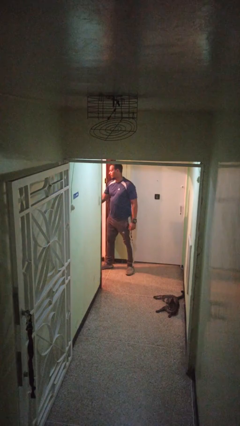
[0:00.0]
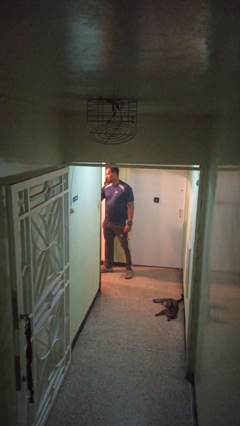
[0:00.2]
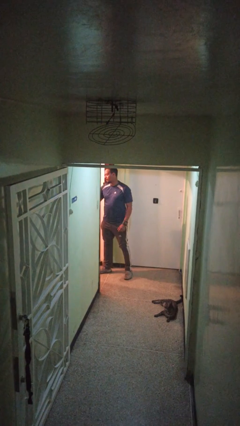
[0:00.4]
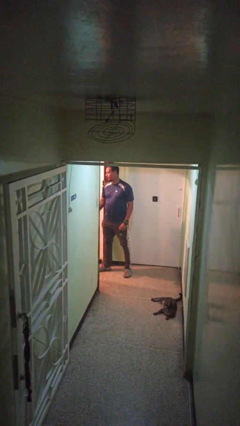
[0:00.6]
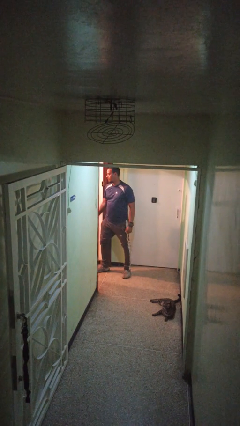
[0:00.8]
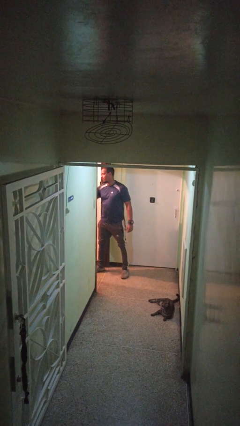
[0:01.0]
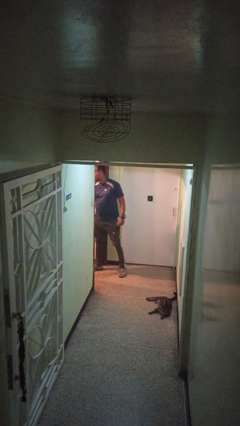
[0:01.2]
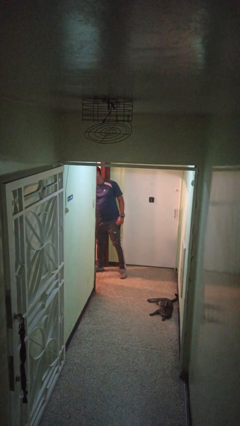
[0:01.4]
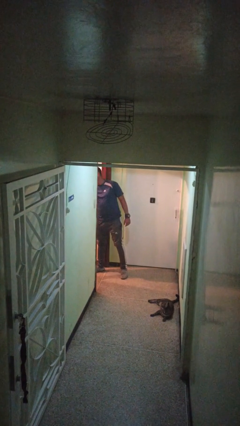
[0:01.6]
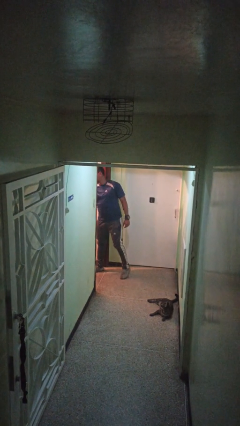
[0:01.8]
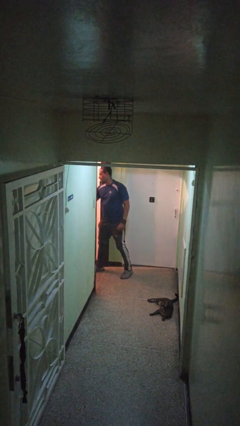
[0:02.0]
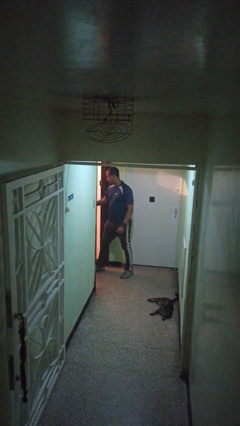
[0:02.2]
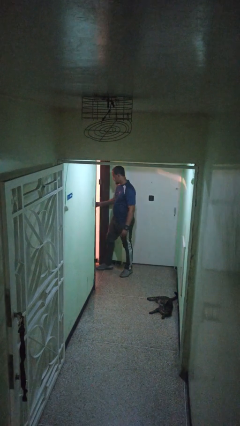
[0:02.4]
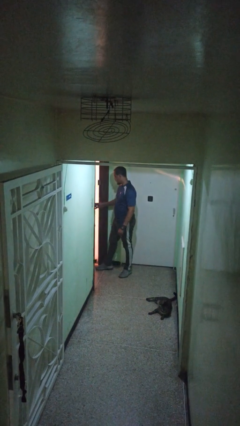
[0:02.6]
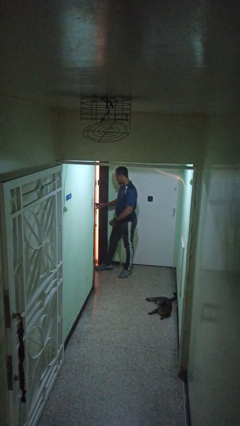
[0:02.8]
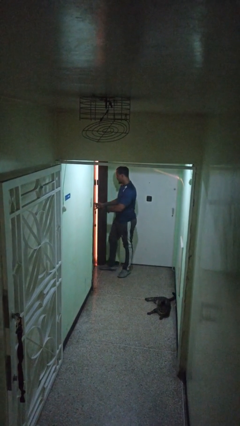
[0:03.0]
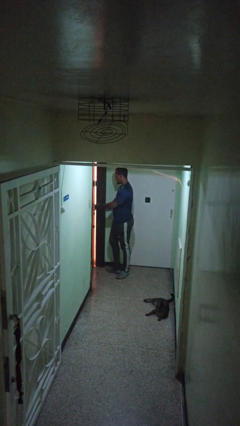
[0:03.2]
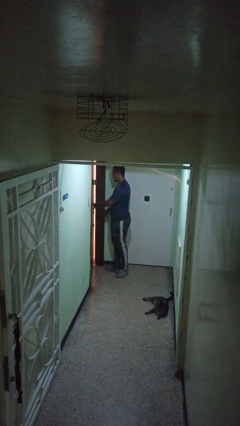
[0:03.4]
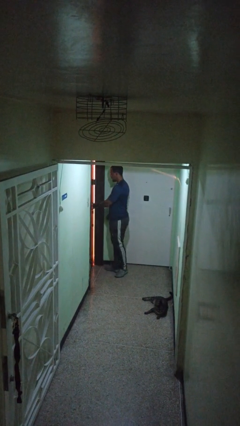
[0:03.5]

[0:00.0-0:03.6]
person closes facility door

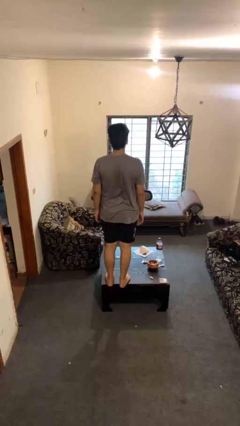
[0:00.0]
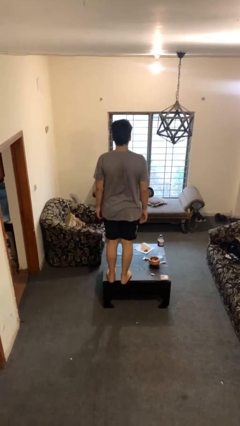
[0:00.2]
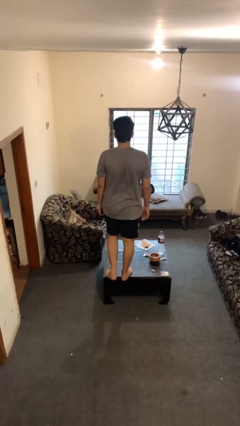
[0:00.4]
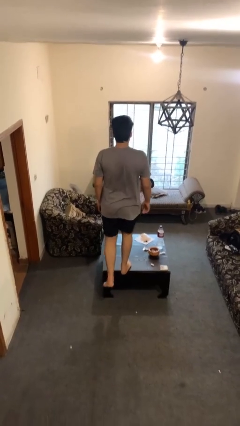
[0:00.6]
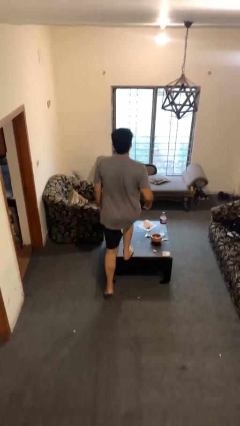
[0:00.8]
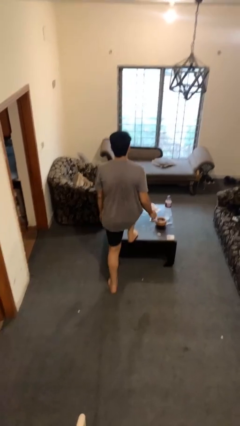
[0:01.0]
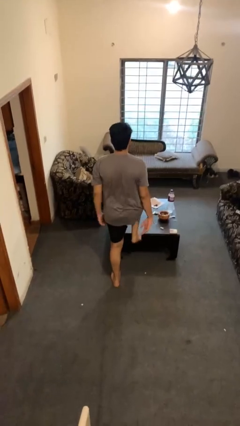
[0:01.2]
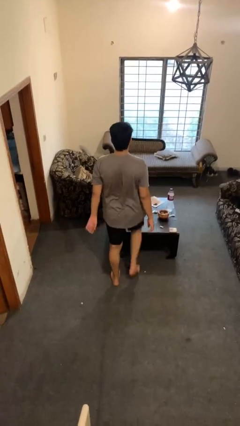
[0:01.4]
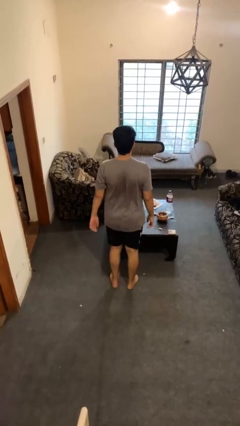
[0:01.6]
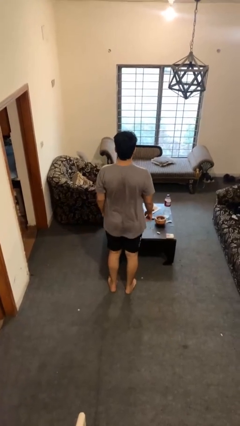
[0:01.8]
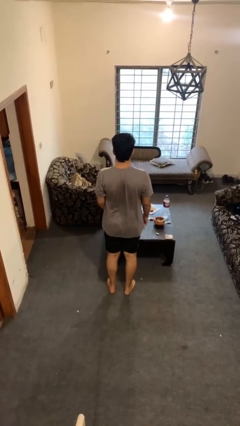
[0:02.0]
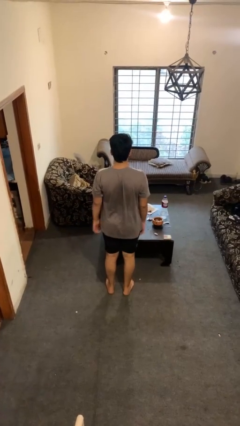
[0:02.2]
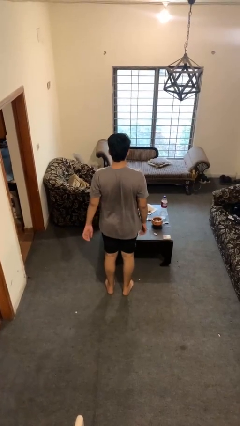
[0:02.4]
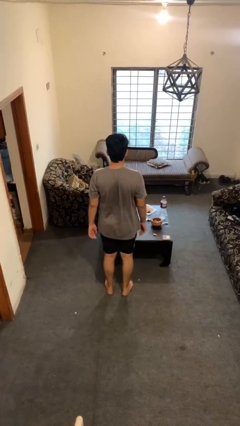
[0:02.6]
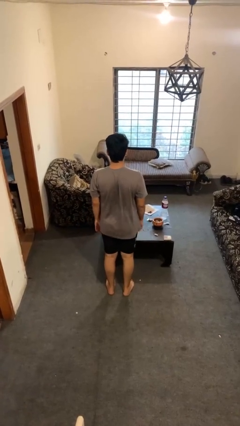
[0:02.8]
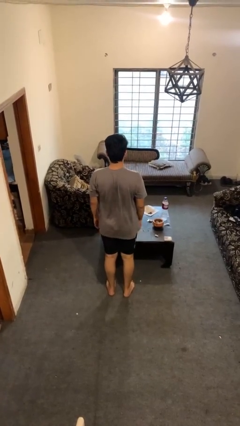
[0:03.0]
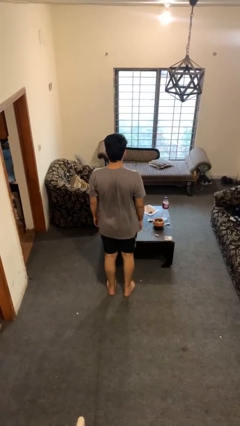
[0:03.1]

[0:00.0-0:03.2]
person climbs off table

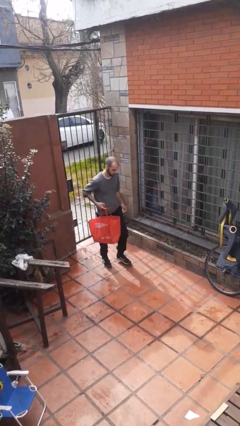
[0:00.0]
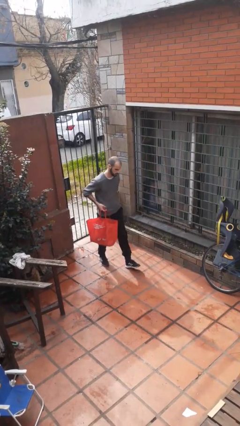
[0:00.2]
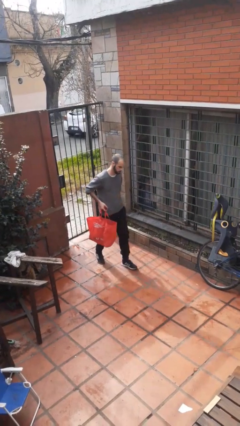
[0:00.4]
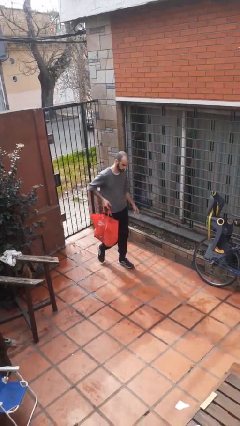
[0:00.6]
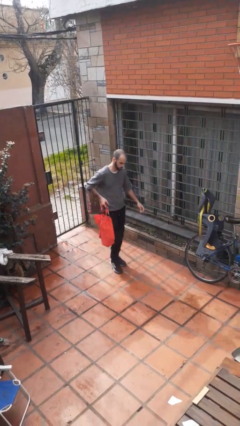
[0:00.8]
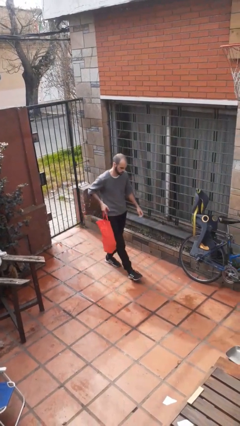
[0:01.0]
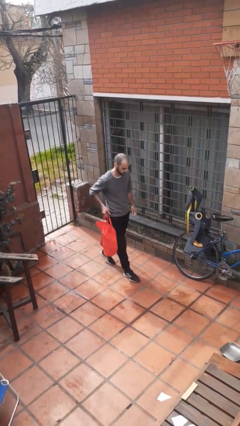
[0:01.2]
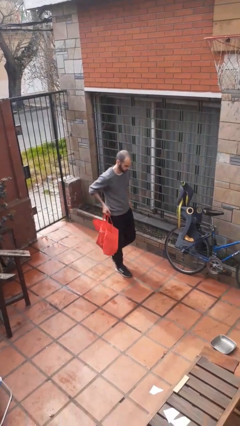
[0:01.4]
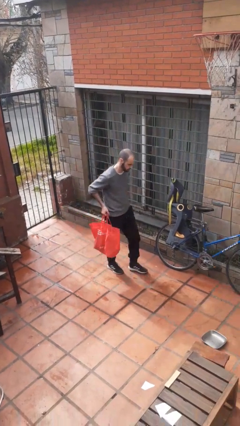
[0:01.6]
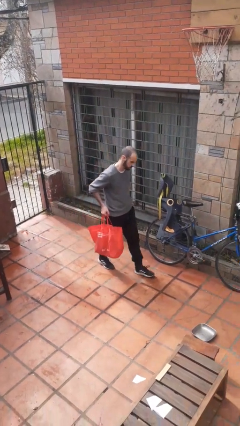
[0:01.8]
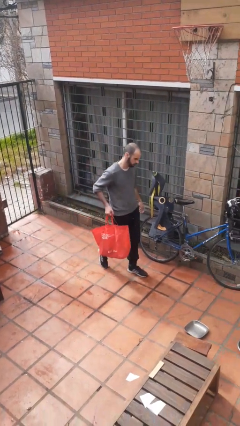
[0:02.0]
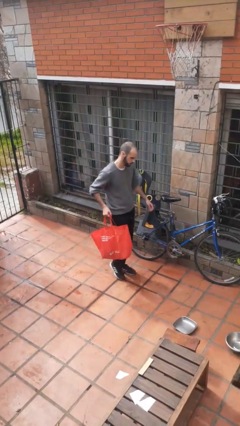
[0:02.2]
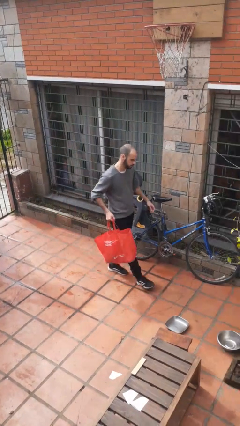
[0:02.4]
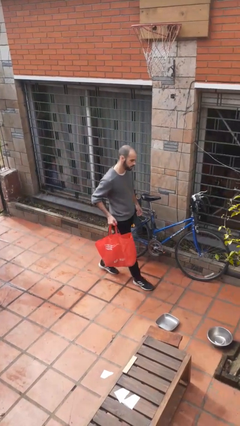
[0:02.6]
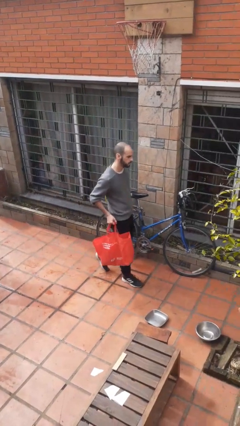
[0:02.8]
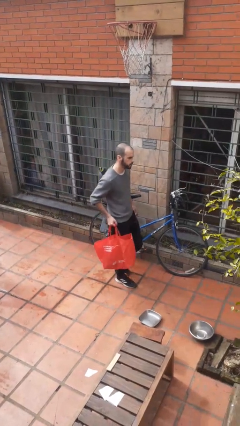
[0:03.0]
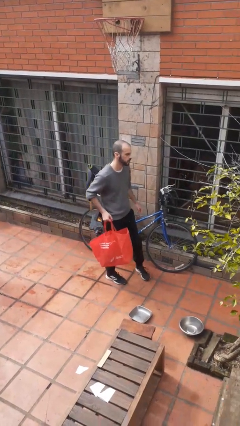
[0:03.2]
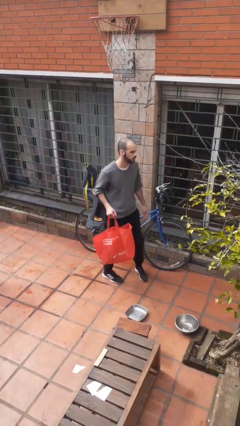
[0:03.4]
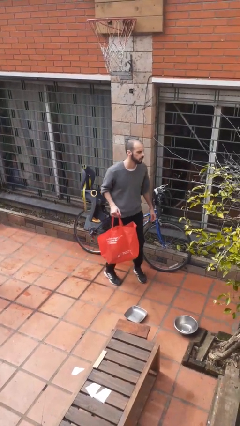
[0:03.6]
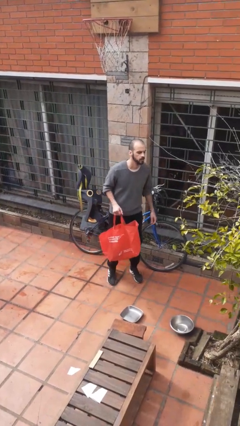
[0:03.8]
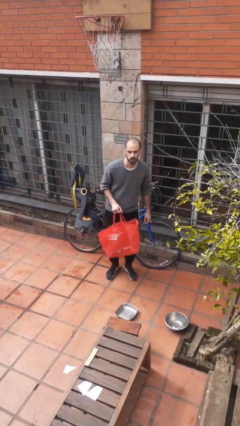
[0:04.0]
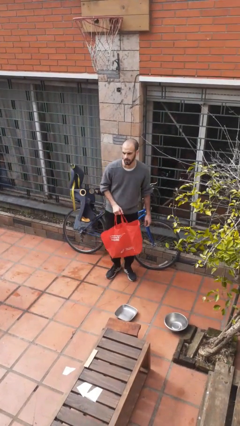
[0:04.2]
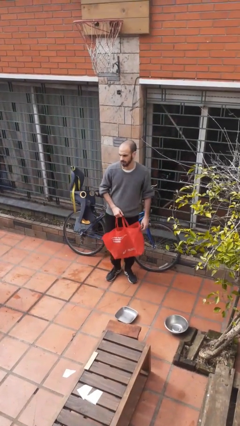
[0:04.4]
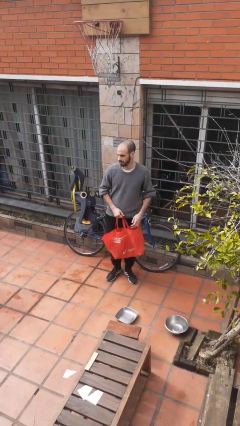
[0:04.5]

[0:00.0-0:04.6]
person carries groceries

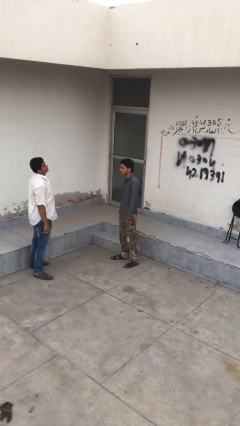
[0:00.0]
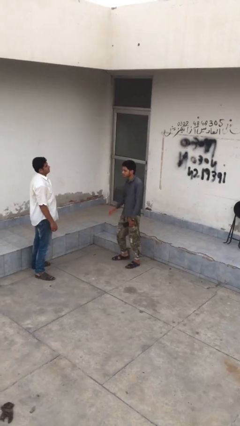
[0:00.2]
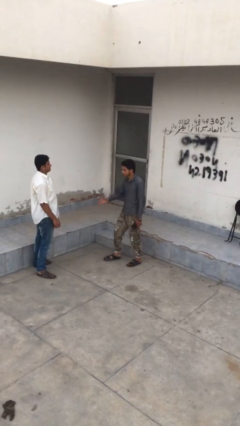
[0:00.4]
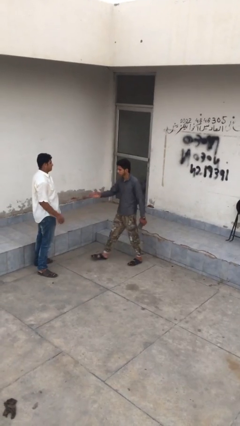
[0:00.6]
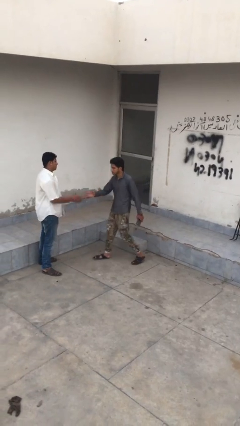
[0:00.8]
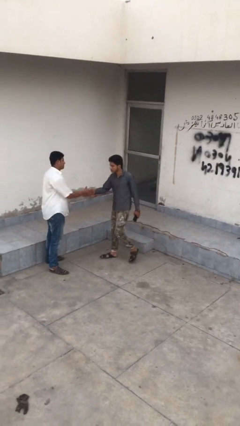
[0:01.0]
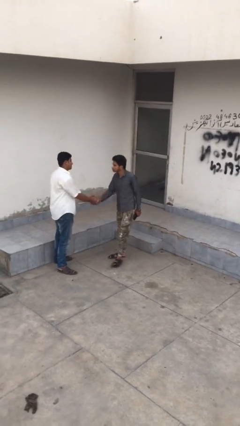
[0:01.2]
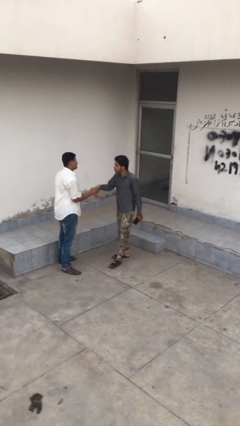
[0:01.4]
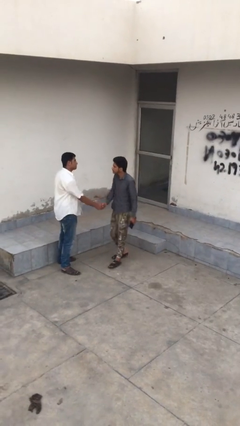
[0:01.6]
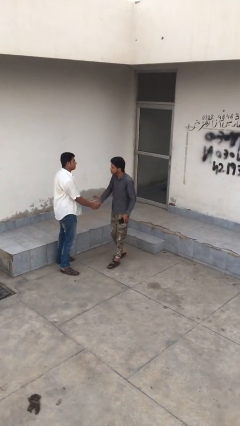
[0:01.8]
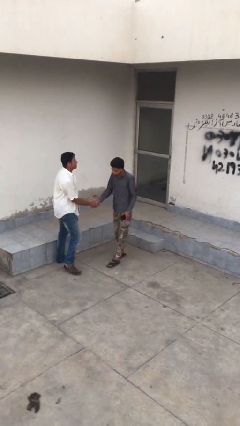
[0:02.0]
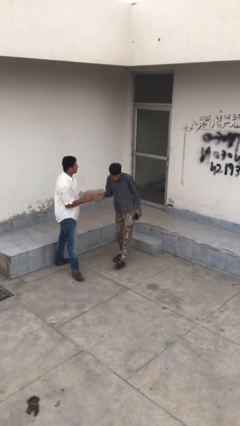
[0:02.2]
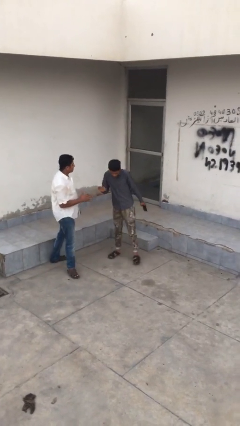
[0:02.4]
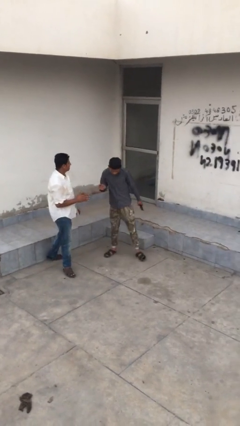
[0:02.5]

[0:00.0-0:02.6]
person shakes hand

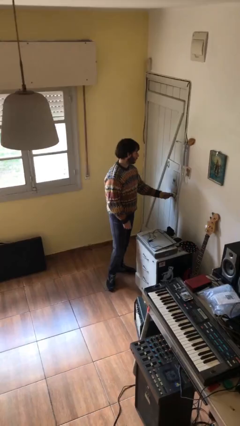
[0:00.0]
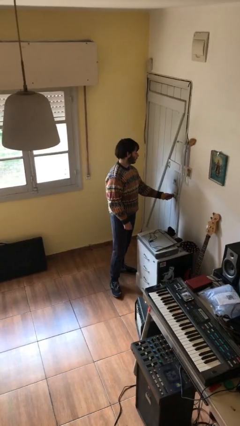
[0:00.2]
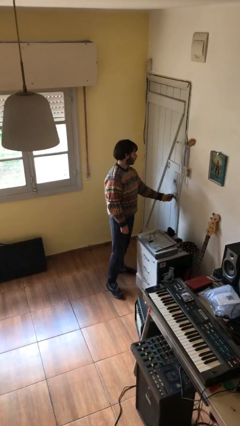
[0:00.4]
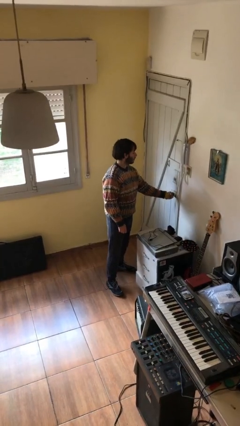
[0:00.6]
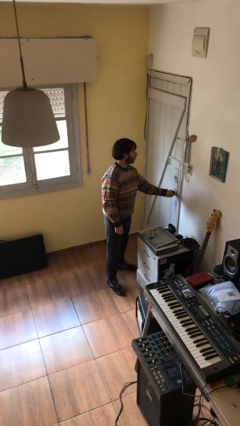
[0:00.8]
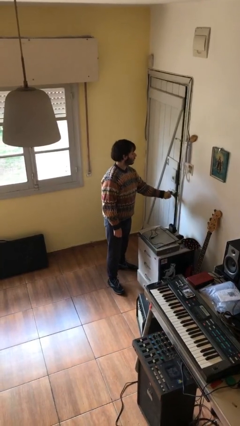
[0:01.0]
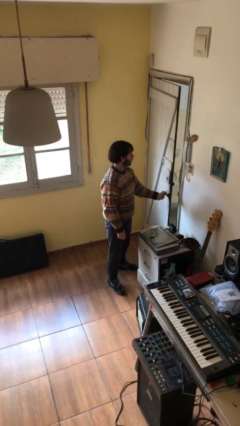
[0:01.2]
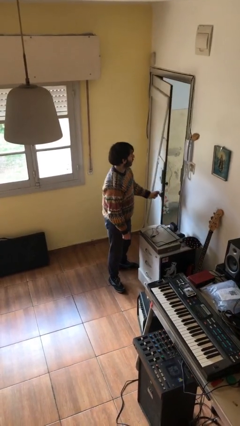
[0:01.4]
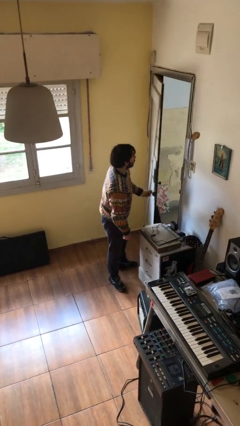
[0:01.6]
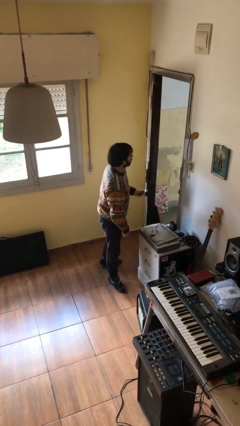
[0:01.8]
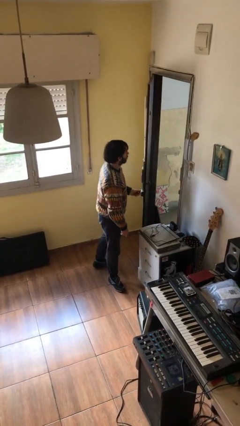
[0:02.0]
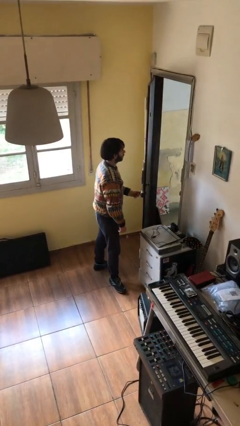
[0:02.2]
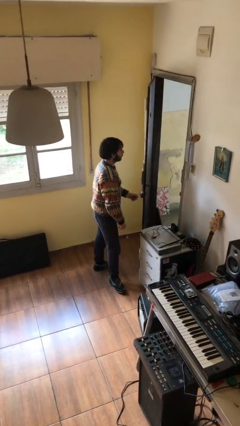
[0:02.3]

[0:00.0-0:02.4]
person opens facility door

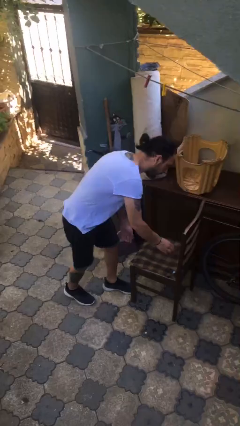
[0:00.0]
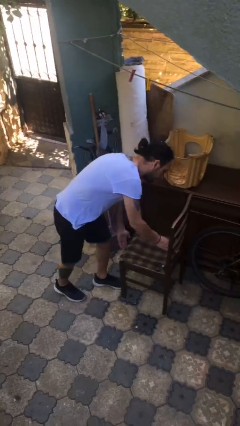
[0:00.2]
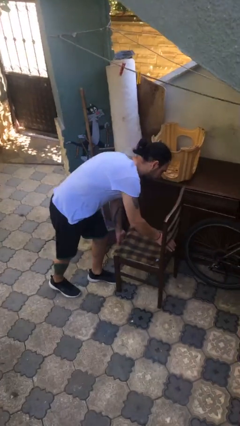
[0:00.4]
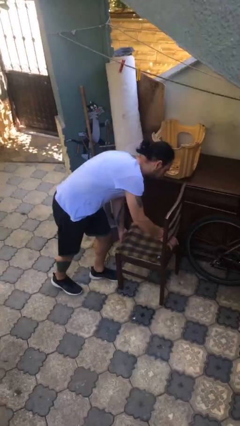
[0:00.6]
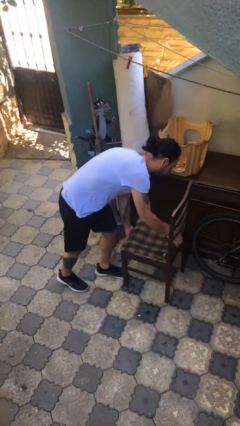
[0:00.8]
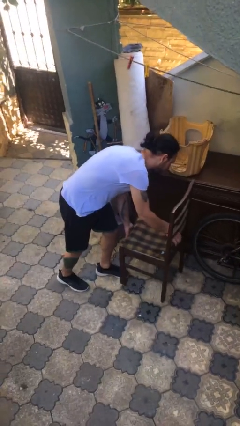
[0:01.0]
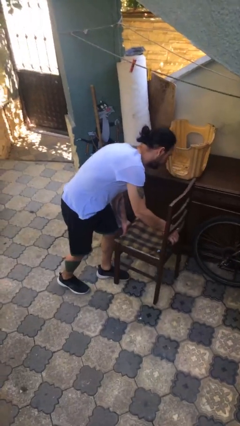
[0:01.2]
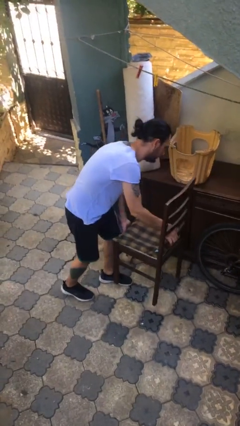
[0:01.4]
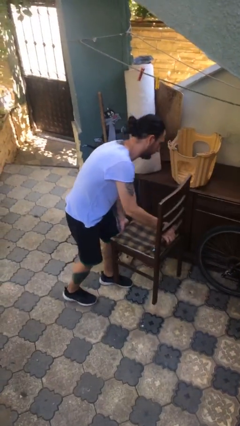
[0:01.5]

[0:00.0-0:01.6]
person picks up object from floor
